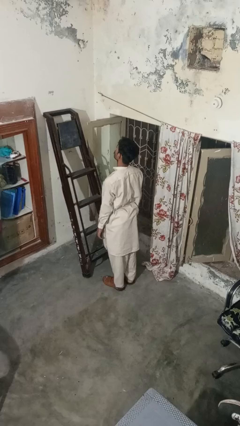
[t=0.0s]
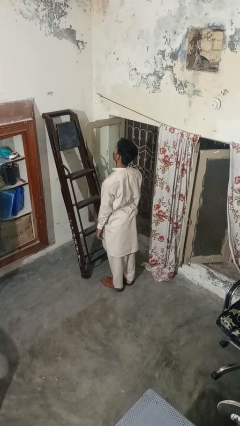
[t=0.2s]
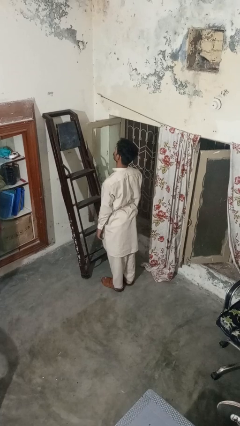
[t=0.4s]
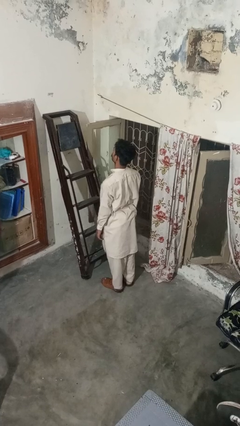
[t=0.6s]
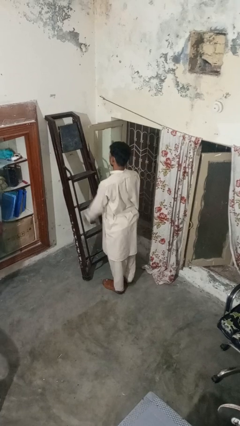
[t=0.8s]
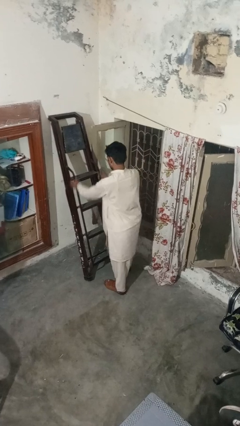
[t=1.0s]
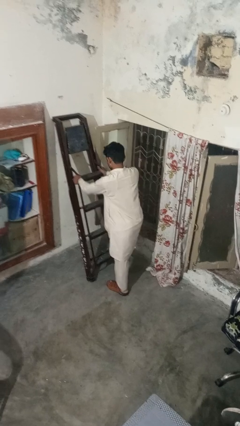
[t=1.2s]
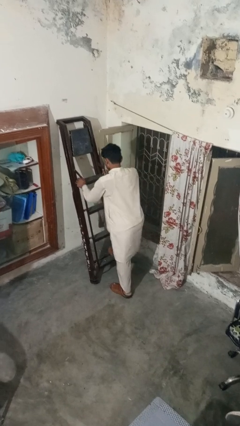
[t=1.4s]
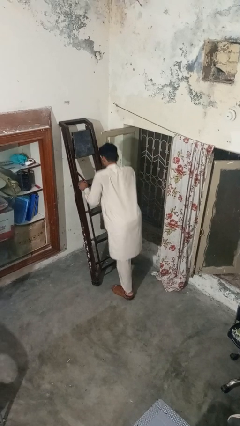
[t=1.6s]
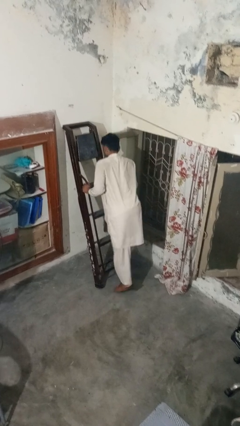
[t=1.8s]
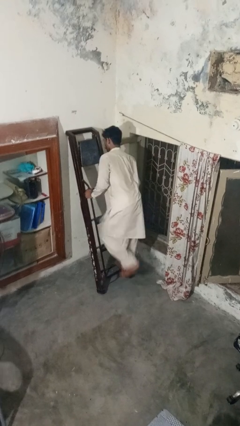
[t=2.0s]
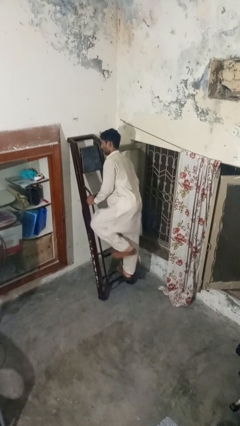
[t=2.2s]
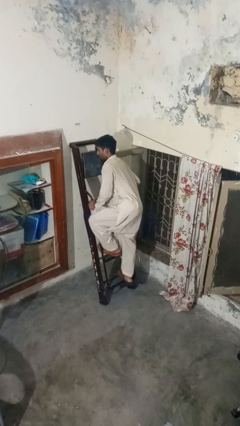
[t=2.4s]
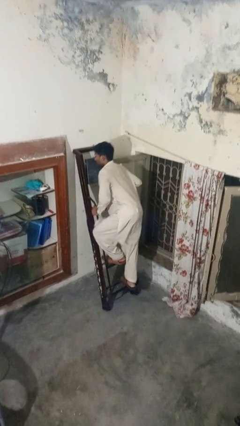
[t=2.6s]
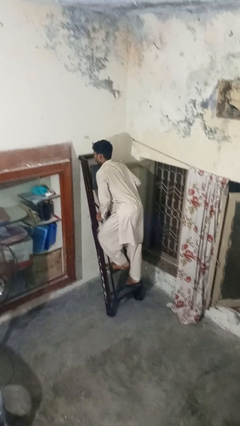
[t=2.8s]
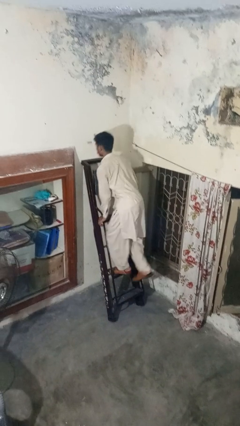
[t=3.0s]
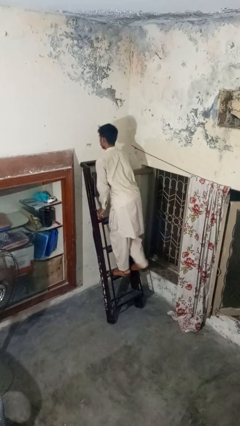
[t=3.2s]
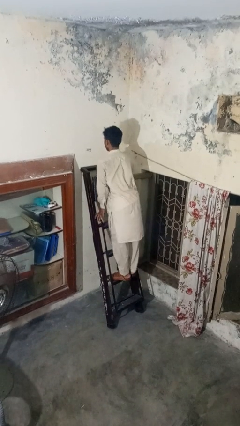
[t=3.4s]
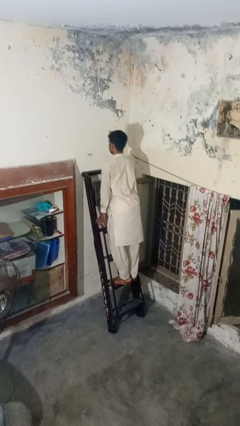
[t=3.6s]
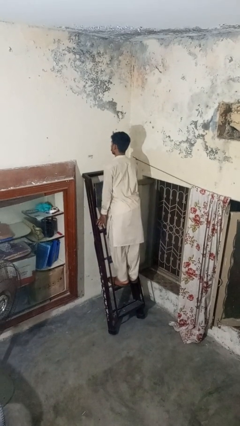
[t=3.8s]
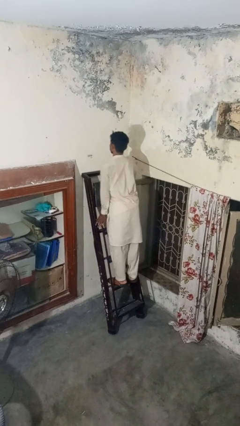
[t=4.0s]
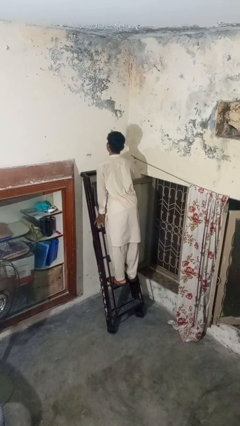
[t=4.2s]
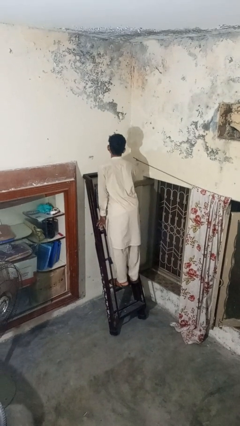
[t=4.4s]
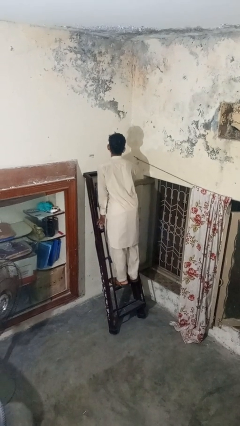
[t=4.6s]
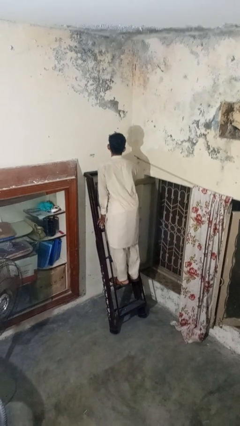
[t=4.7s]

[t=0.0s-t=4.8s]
person climbs up ladder

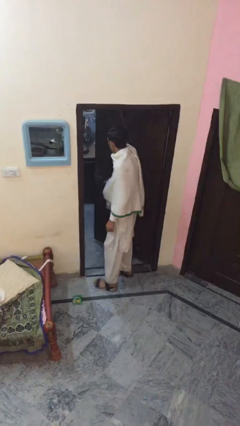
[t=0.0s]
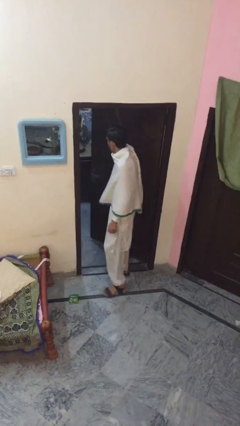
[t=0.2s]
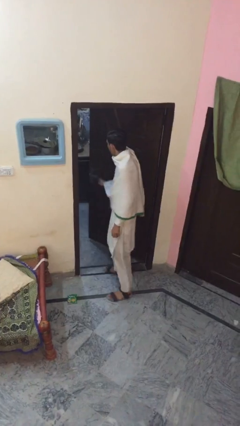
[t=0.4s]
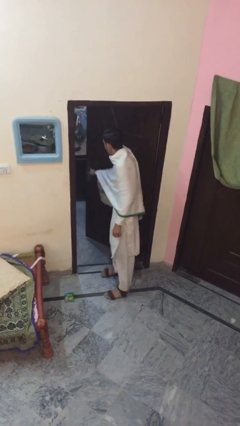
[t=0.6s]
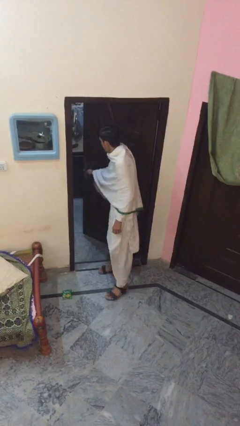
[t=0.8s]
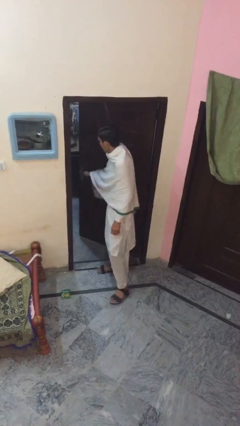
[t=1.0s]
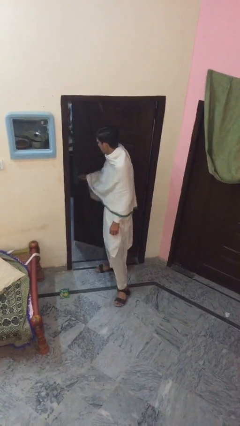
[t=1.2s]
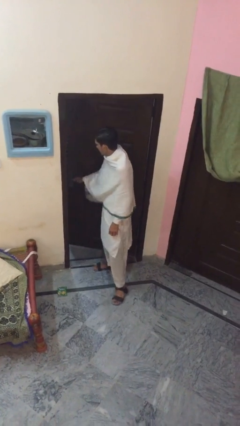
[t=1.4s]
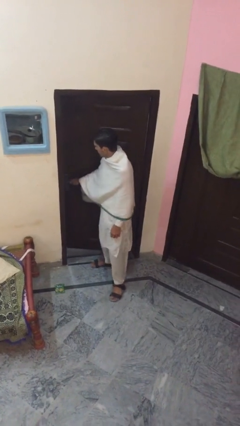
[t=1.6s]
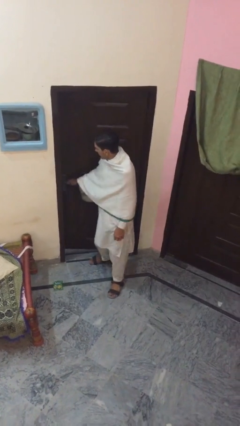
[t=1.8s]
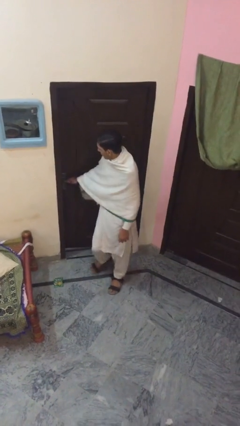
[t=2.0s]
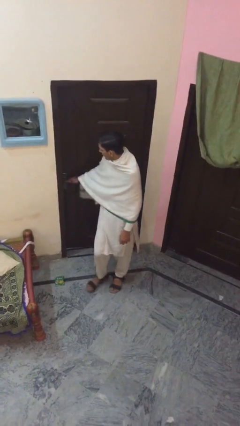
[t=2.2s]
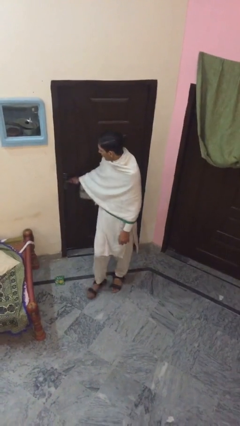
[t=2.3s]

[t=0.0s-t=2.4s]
person closes facility door

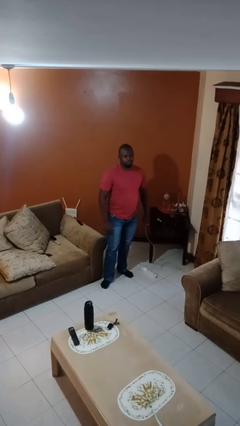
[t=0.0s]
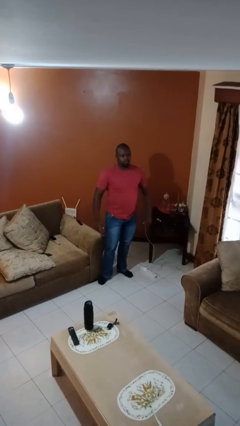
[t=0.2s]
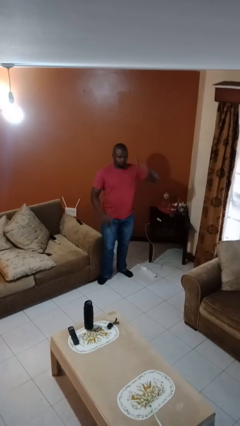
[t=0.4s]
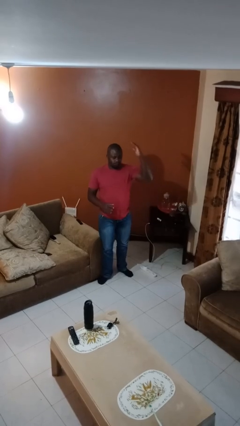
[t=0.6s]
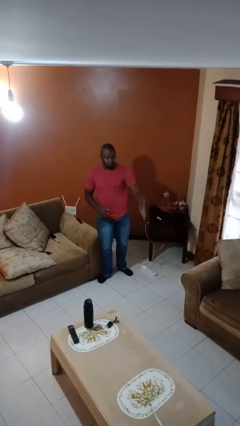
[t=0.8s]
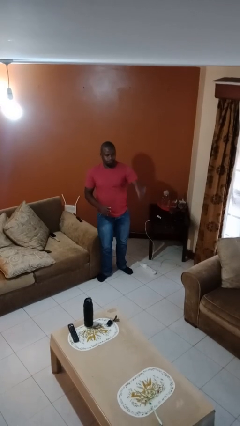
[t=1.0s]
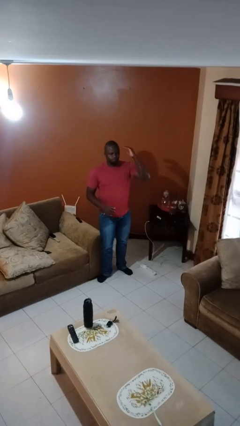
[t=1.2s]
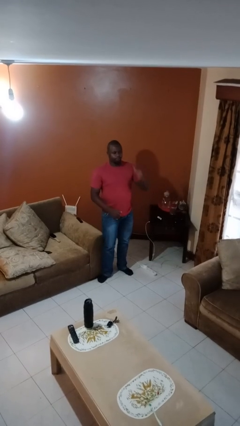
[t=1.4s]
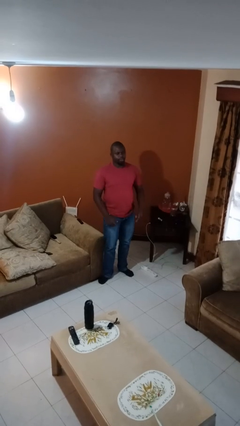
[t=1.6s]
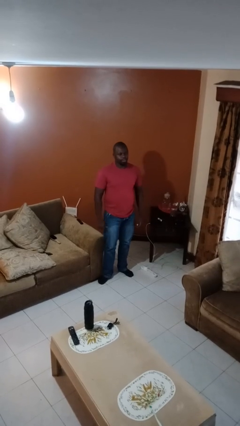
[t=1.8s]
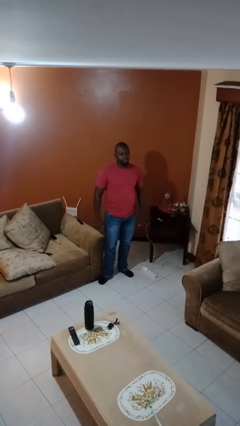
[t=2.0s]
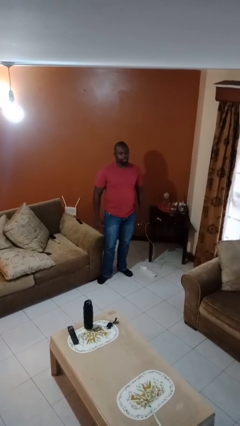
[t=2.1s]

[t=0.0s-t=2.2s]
person karate chop

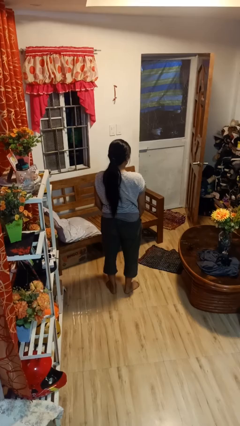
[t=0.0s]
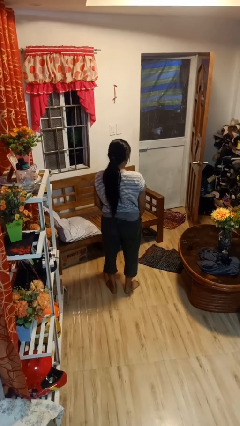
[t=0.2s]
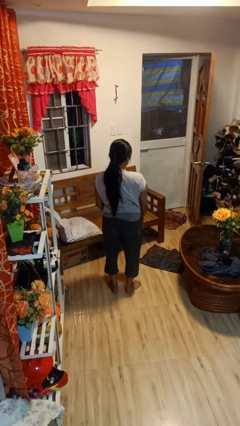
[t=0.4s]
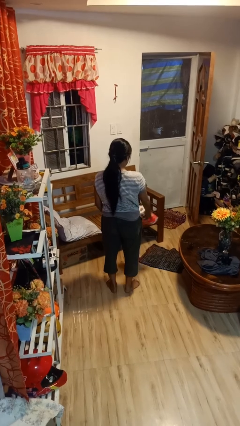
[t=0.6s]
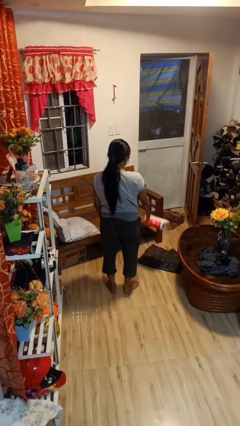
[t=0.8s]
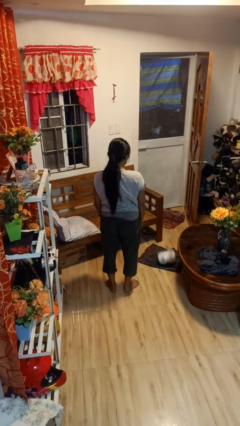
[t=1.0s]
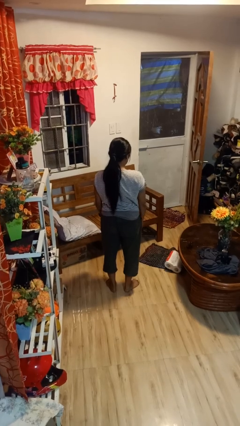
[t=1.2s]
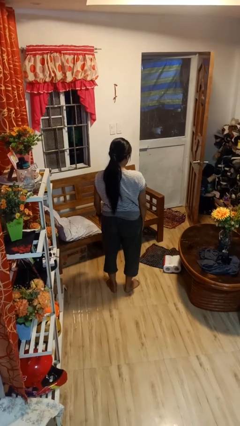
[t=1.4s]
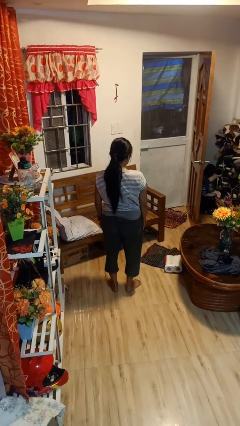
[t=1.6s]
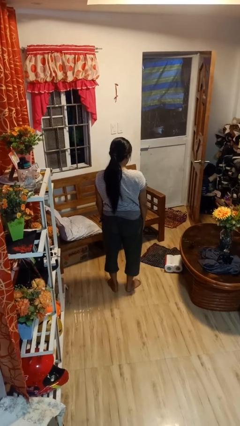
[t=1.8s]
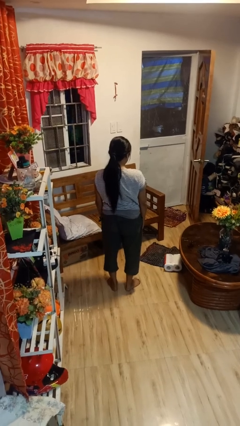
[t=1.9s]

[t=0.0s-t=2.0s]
person throws object to ground

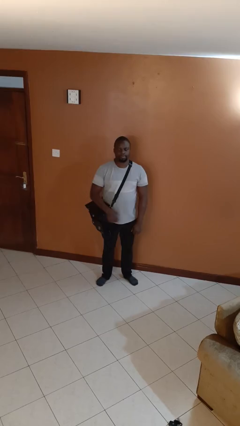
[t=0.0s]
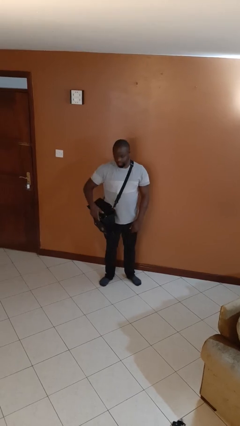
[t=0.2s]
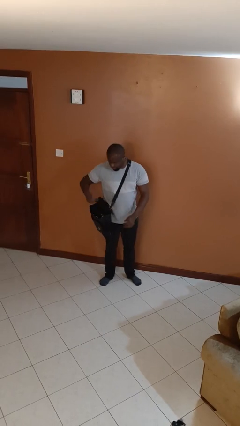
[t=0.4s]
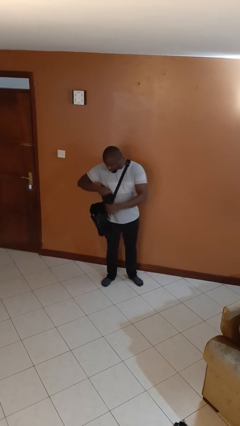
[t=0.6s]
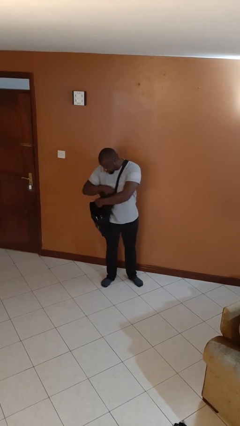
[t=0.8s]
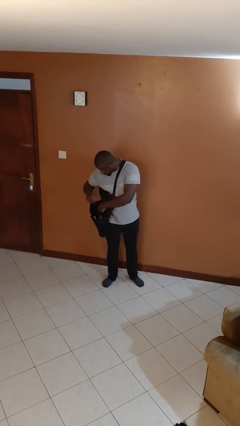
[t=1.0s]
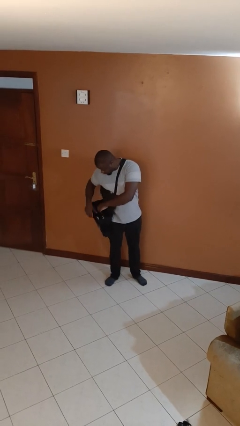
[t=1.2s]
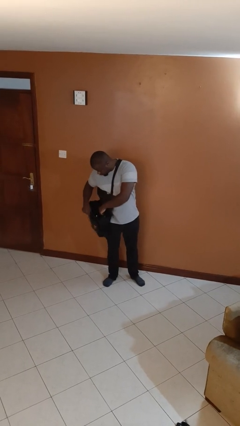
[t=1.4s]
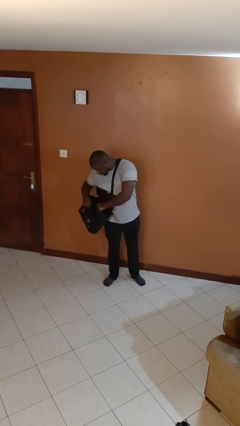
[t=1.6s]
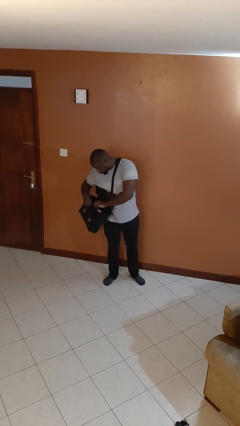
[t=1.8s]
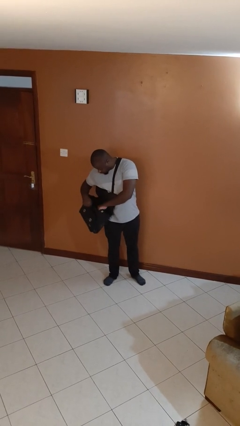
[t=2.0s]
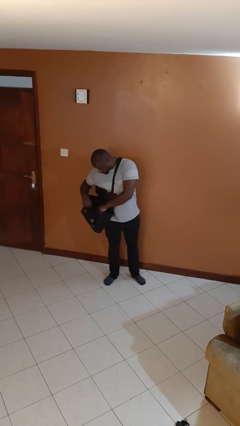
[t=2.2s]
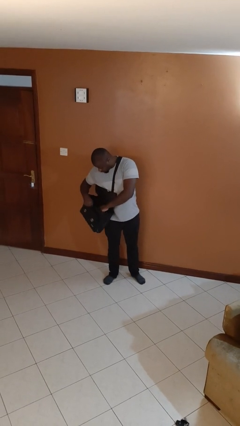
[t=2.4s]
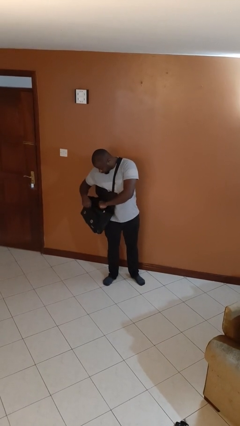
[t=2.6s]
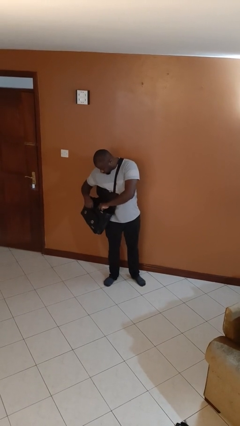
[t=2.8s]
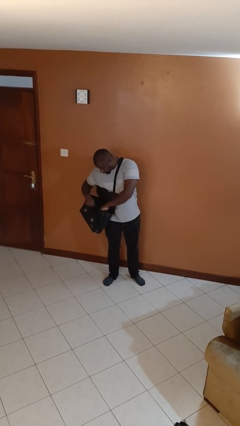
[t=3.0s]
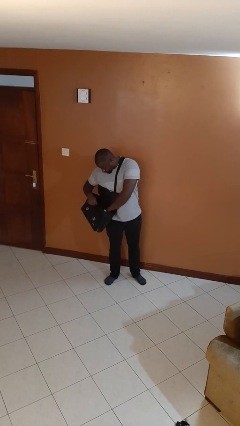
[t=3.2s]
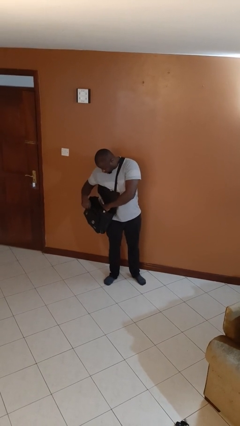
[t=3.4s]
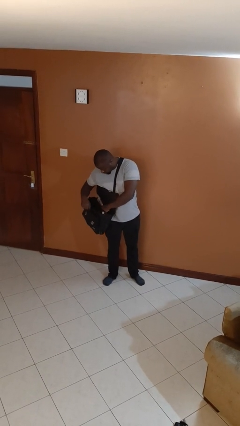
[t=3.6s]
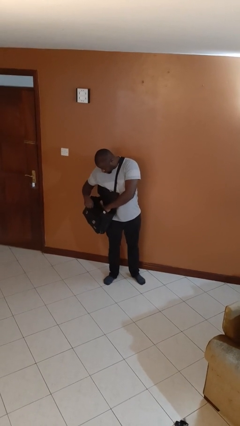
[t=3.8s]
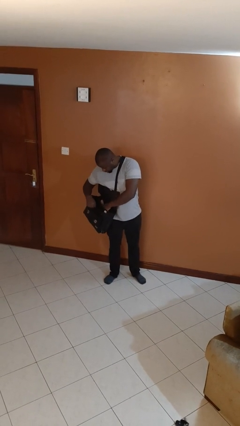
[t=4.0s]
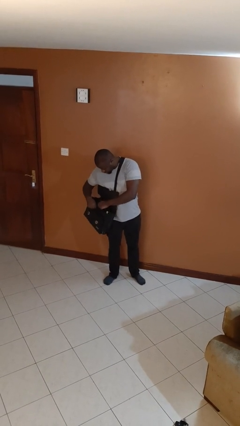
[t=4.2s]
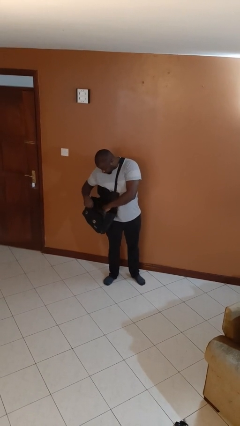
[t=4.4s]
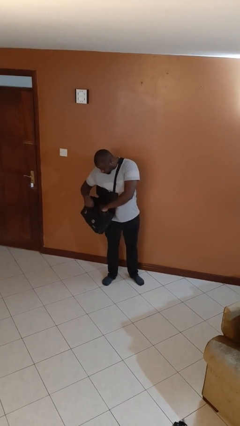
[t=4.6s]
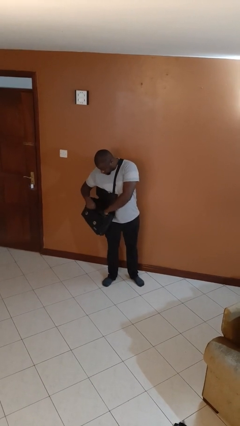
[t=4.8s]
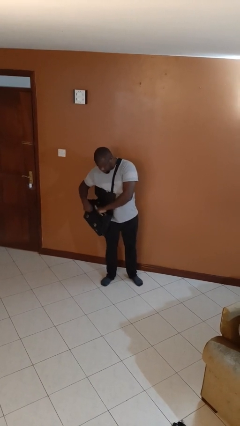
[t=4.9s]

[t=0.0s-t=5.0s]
person searches in purse

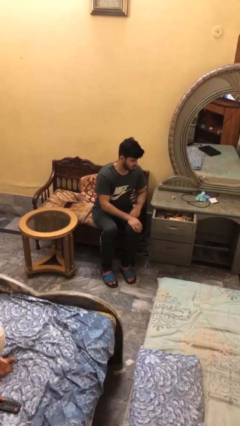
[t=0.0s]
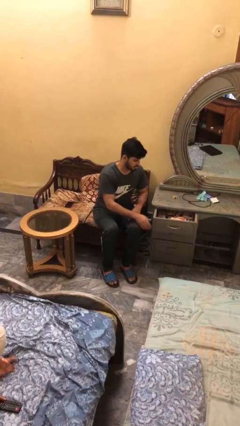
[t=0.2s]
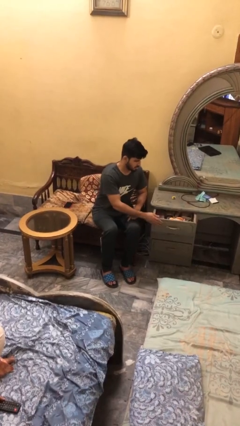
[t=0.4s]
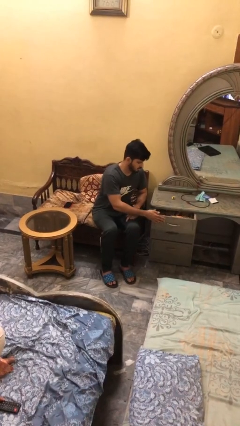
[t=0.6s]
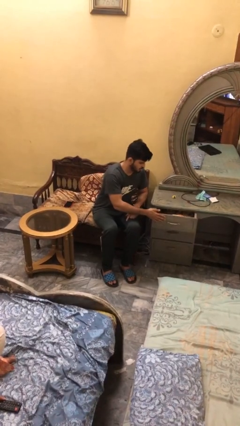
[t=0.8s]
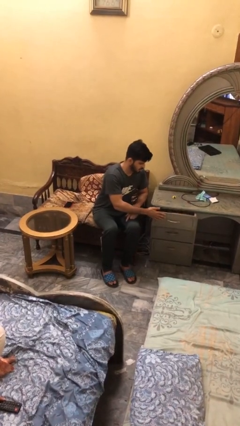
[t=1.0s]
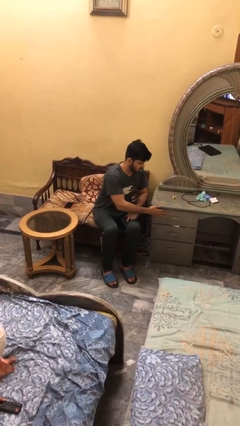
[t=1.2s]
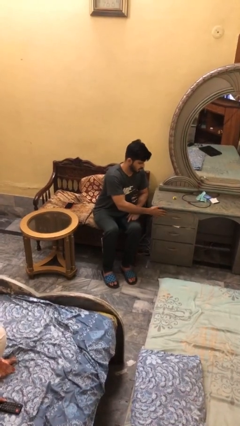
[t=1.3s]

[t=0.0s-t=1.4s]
person closes dresser drawer

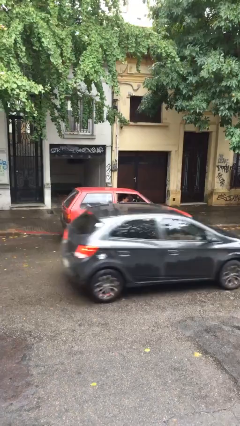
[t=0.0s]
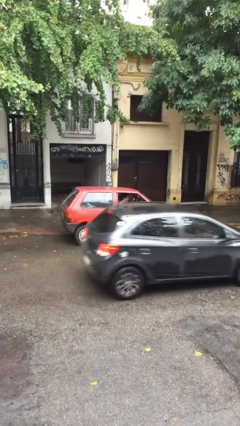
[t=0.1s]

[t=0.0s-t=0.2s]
car drops off person
